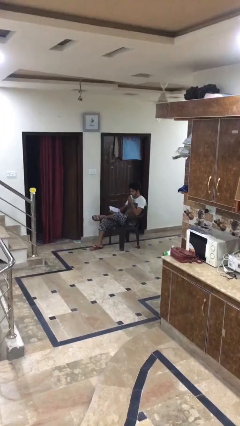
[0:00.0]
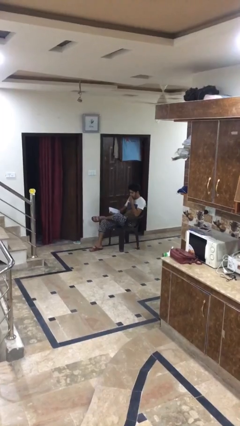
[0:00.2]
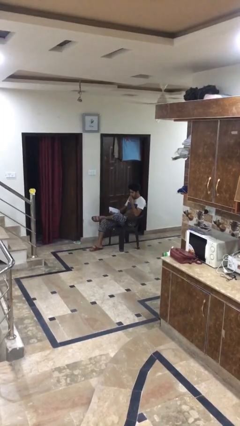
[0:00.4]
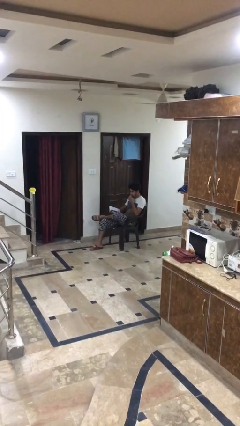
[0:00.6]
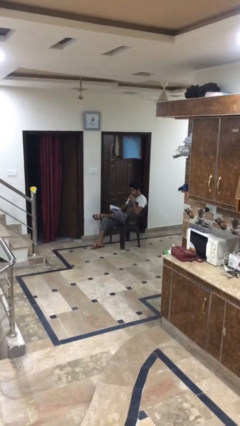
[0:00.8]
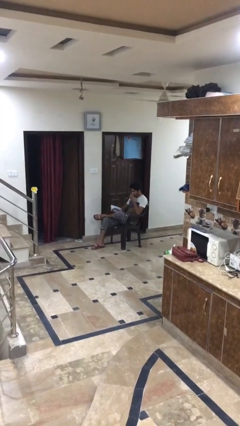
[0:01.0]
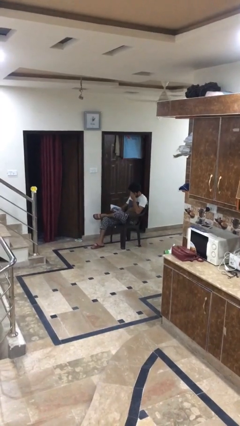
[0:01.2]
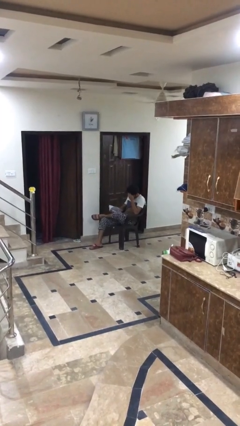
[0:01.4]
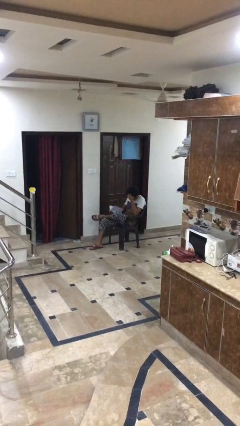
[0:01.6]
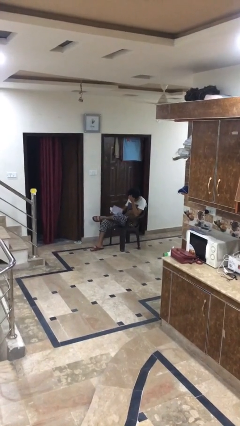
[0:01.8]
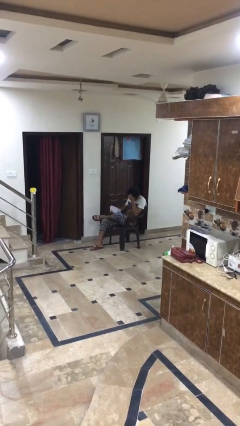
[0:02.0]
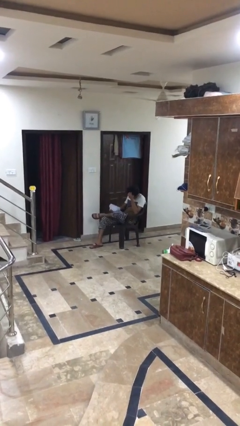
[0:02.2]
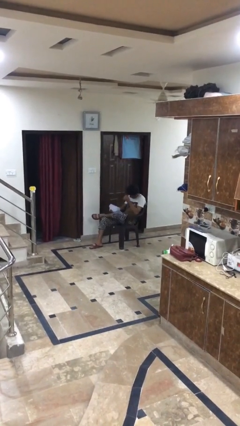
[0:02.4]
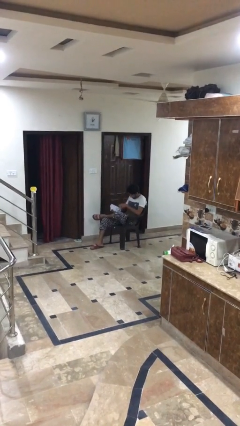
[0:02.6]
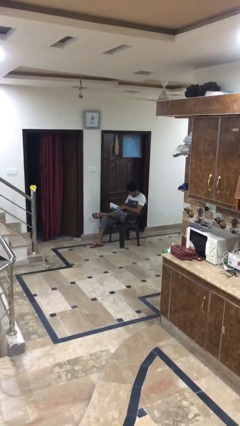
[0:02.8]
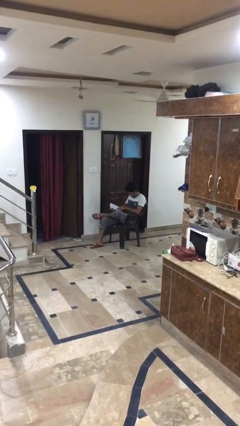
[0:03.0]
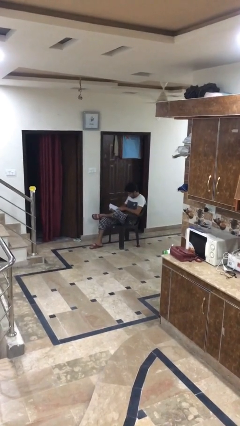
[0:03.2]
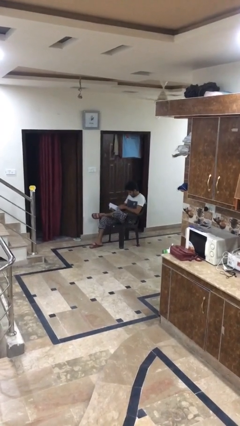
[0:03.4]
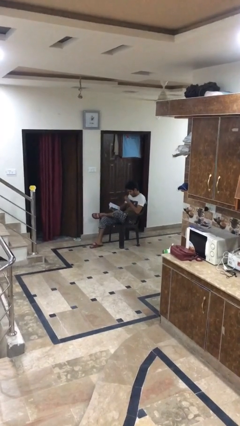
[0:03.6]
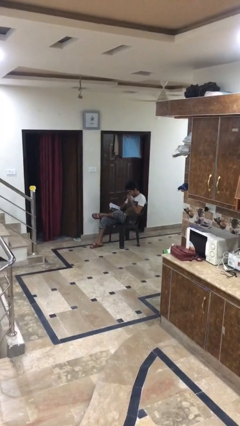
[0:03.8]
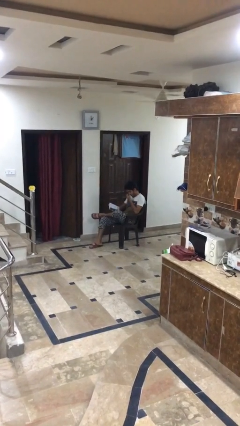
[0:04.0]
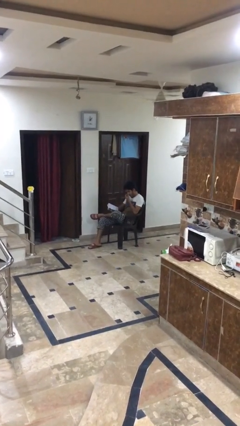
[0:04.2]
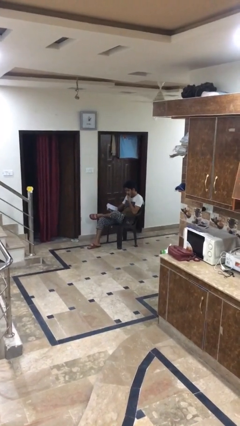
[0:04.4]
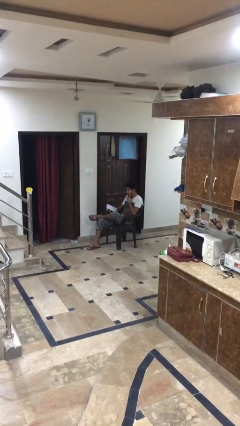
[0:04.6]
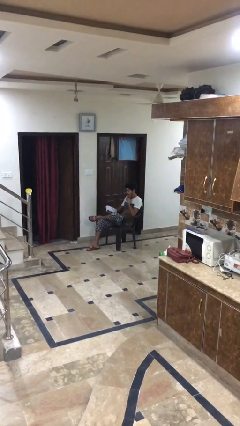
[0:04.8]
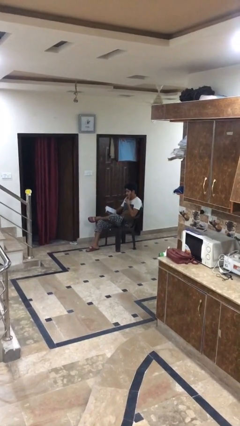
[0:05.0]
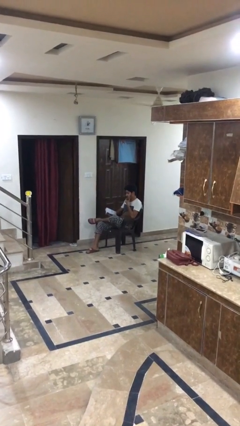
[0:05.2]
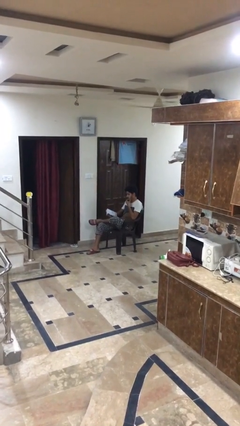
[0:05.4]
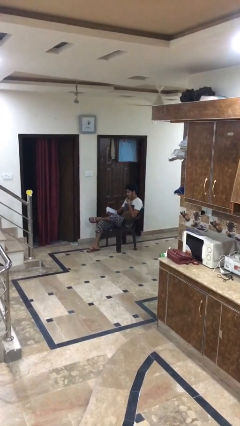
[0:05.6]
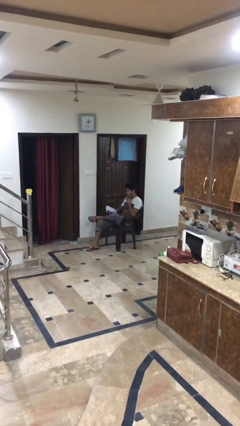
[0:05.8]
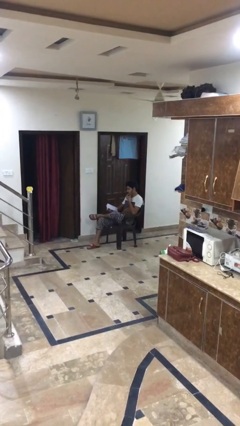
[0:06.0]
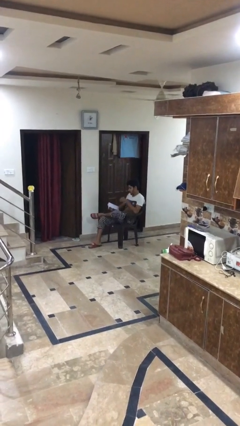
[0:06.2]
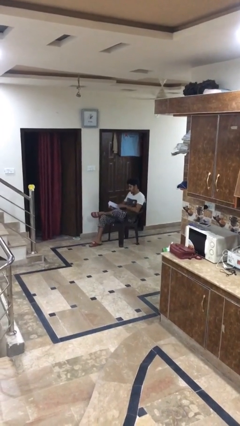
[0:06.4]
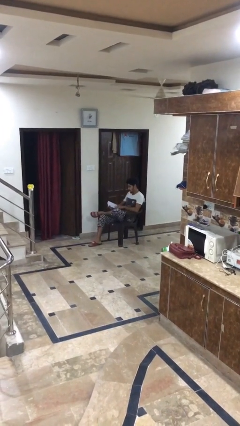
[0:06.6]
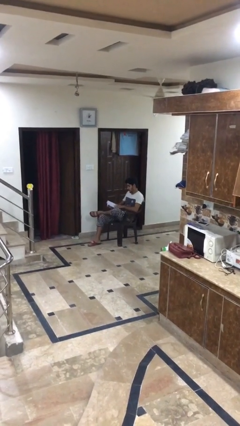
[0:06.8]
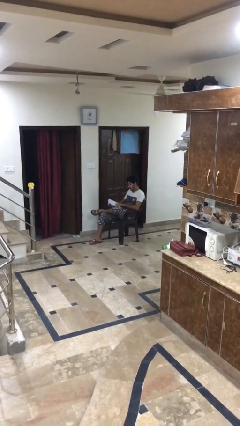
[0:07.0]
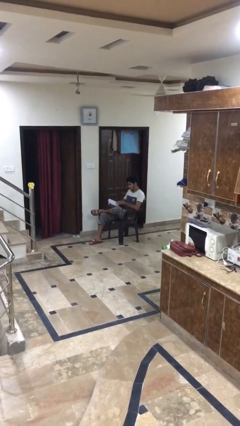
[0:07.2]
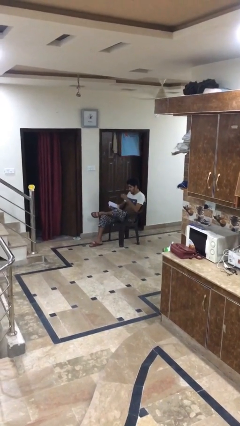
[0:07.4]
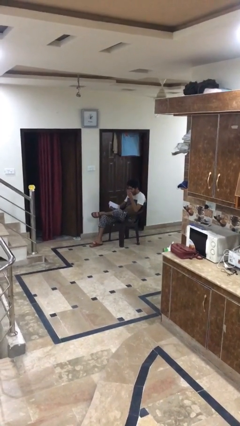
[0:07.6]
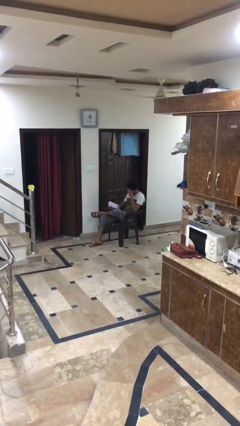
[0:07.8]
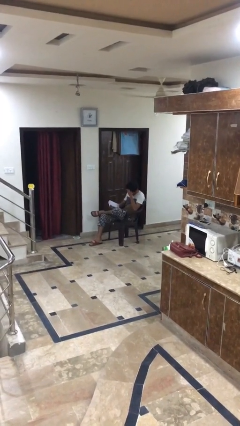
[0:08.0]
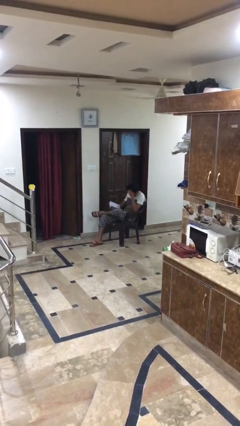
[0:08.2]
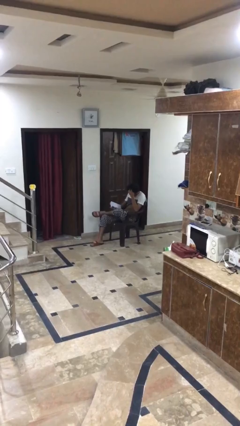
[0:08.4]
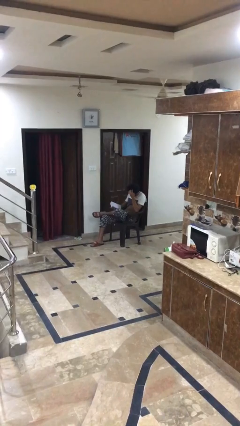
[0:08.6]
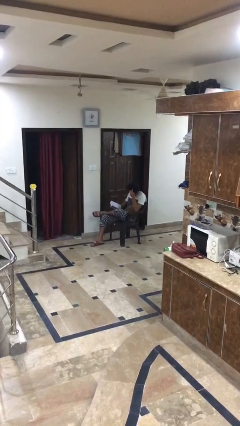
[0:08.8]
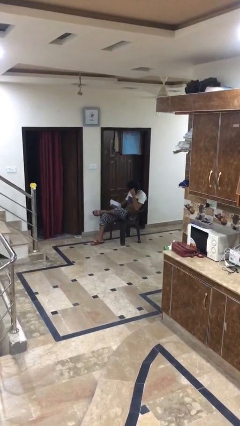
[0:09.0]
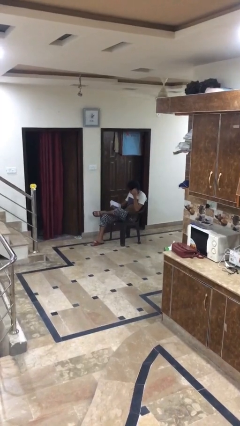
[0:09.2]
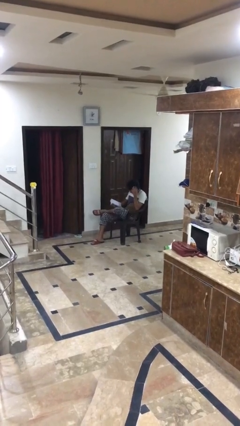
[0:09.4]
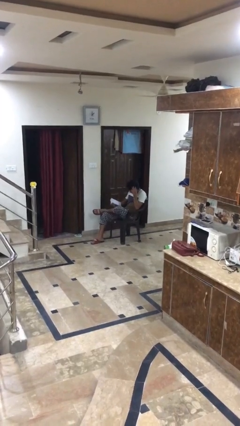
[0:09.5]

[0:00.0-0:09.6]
person reads document

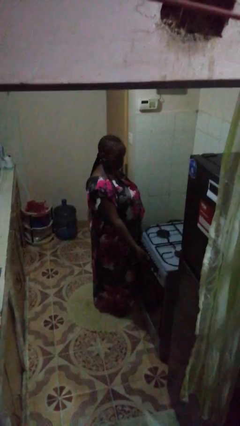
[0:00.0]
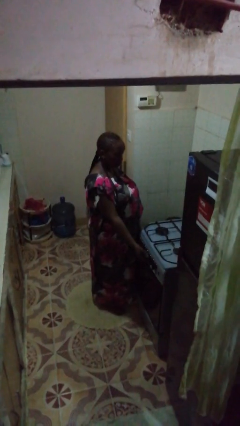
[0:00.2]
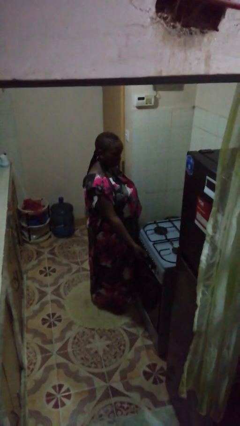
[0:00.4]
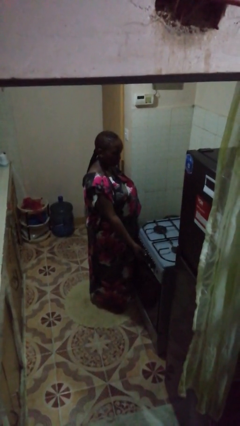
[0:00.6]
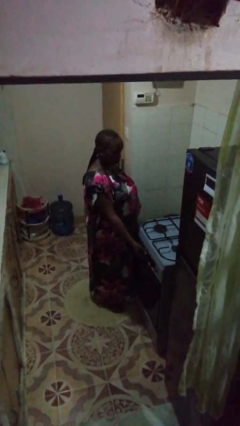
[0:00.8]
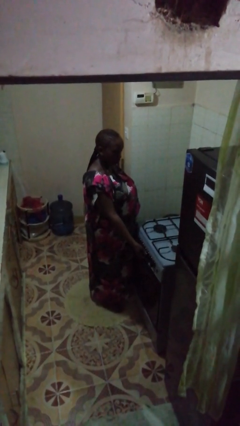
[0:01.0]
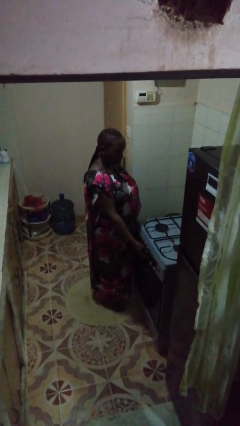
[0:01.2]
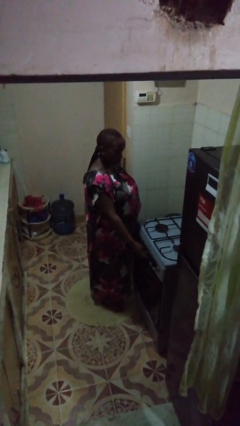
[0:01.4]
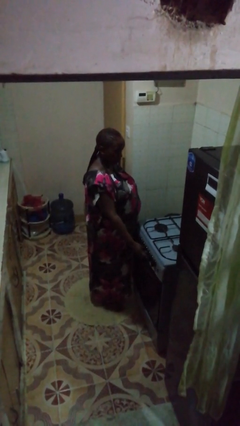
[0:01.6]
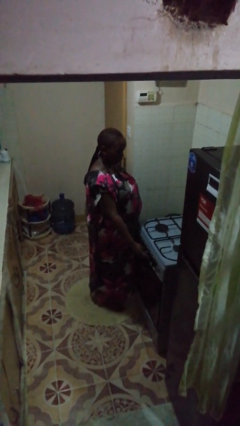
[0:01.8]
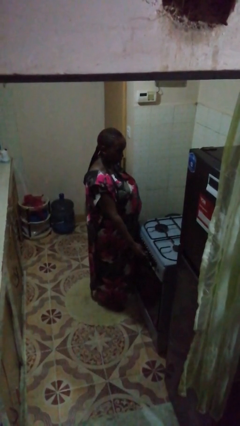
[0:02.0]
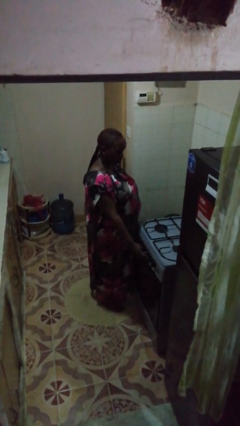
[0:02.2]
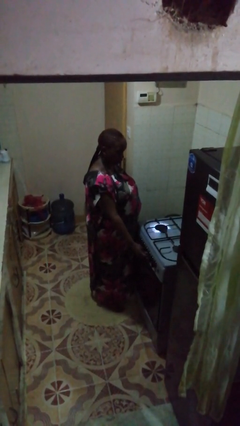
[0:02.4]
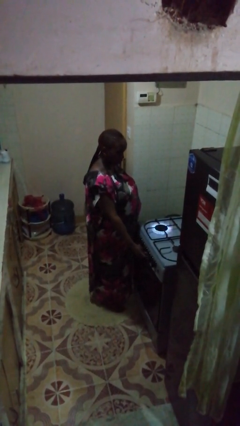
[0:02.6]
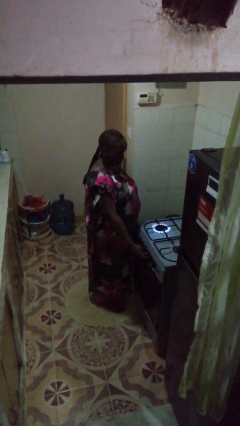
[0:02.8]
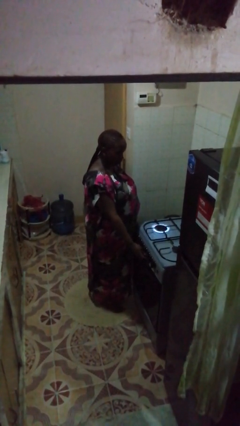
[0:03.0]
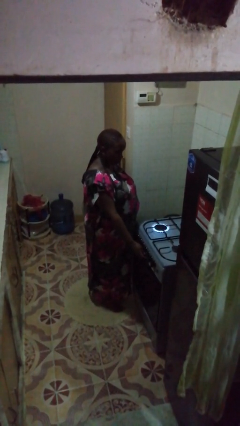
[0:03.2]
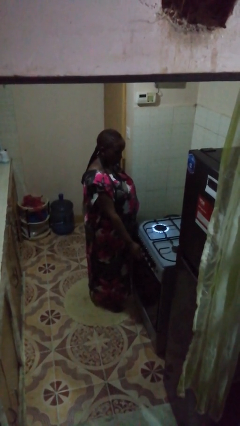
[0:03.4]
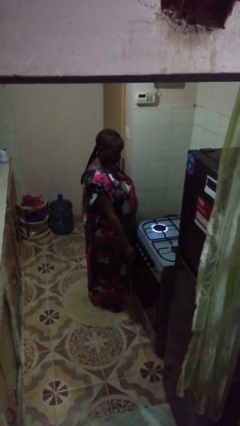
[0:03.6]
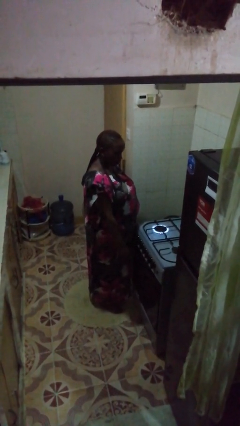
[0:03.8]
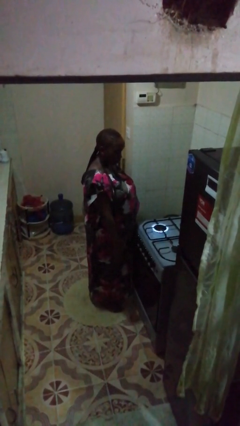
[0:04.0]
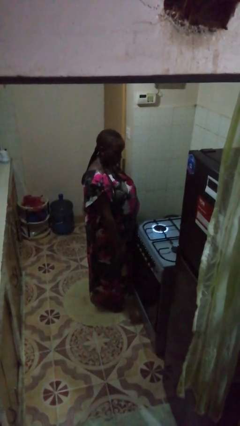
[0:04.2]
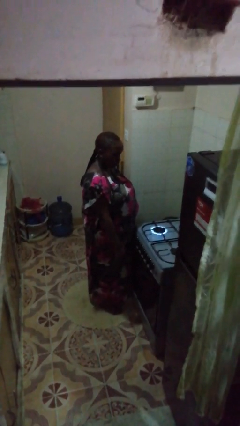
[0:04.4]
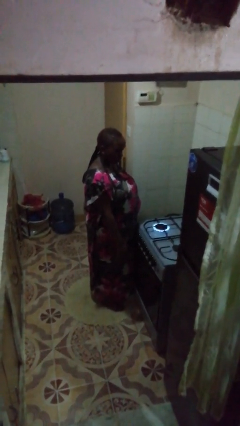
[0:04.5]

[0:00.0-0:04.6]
person turns on stovetop

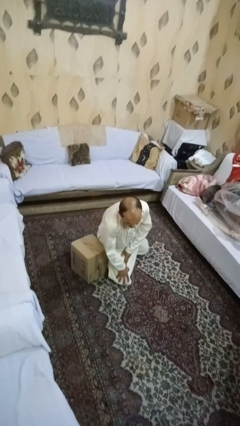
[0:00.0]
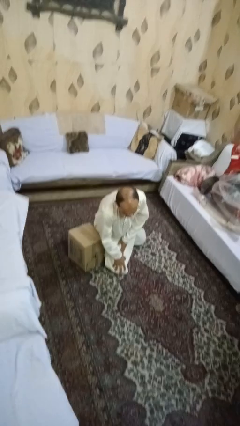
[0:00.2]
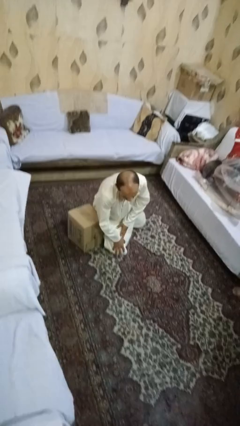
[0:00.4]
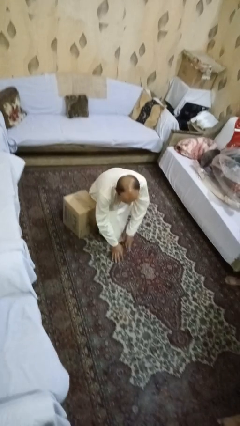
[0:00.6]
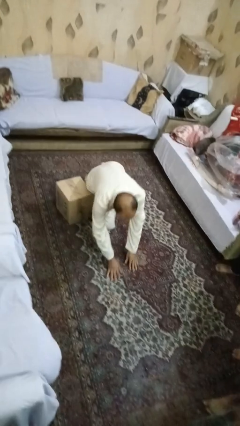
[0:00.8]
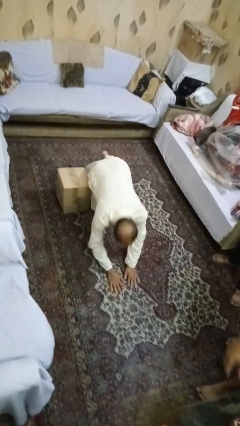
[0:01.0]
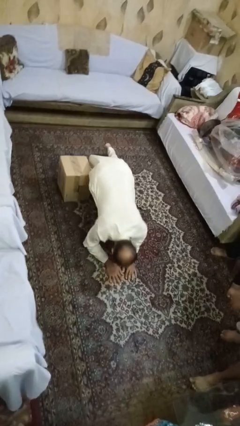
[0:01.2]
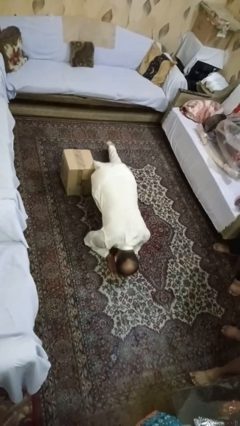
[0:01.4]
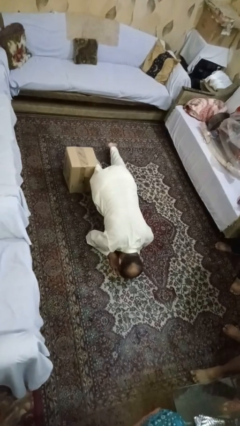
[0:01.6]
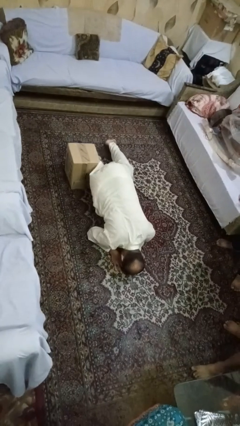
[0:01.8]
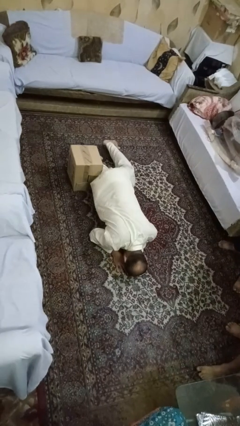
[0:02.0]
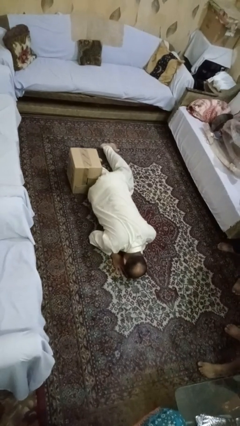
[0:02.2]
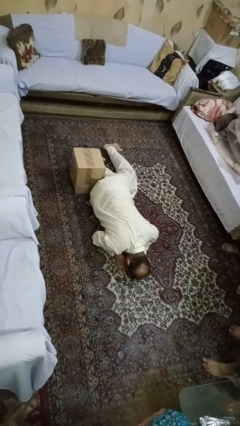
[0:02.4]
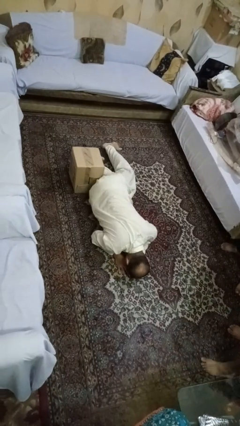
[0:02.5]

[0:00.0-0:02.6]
person lies down on floor

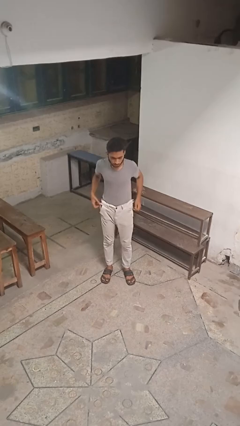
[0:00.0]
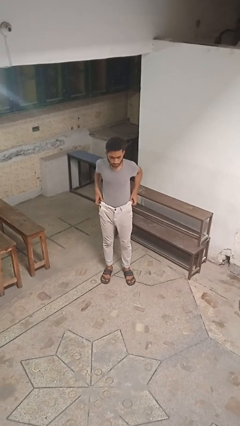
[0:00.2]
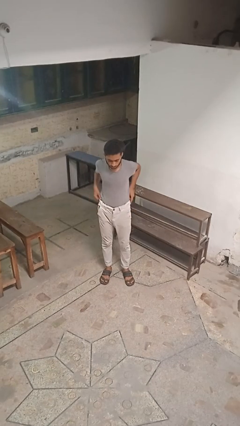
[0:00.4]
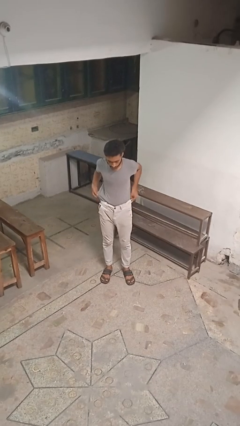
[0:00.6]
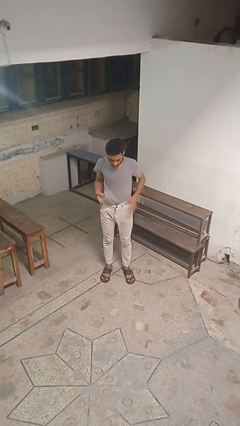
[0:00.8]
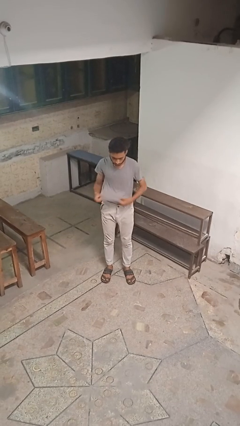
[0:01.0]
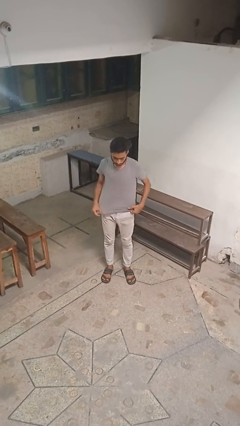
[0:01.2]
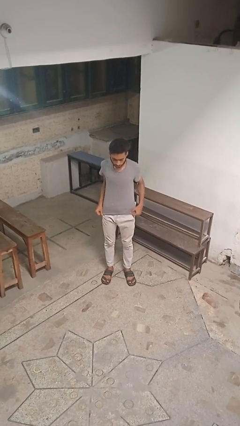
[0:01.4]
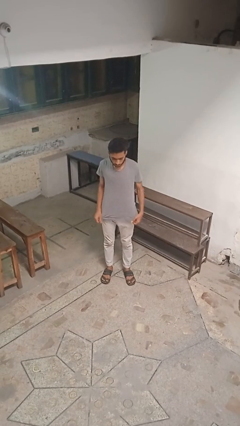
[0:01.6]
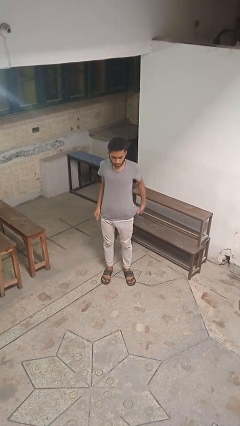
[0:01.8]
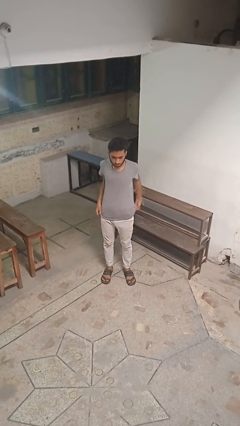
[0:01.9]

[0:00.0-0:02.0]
person untucks shirt
